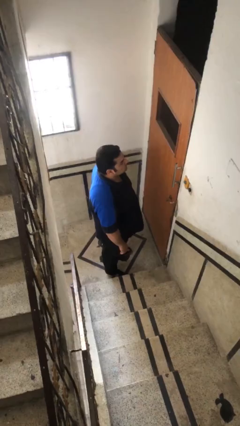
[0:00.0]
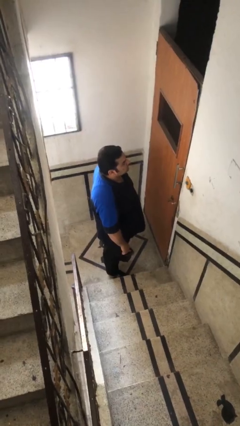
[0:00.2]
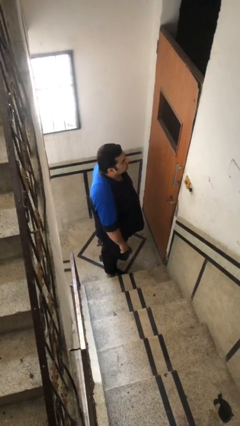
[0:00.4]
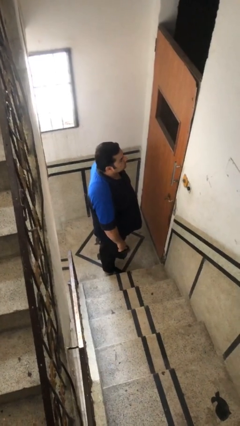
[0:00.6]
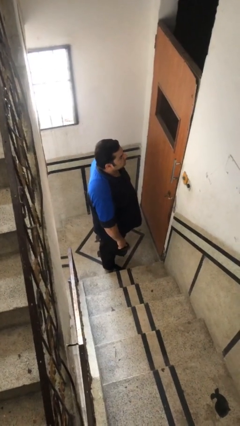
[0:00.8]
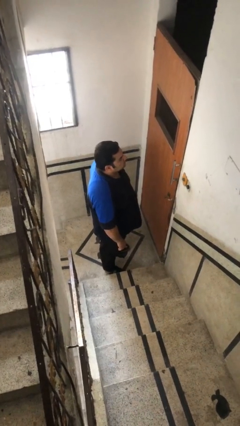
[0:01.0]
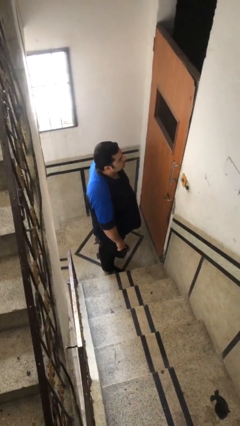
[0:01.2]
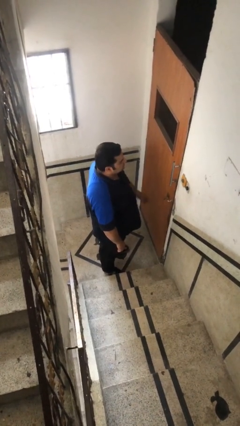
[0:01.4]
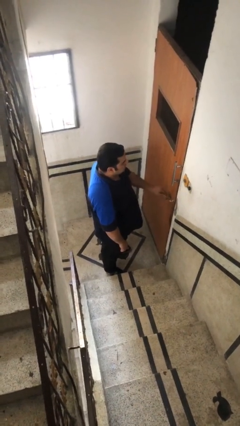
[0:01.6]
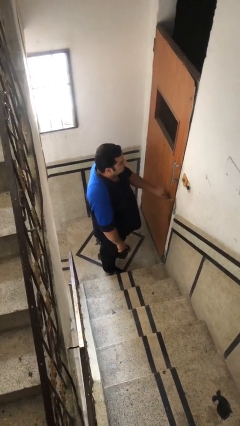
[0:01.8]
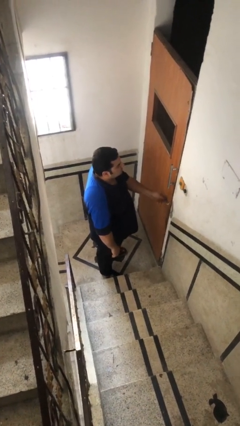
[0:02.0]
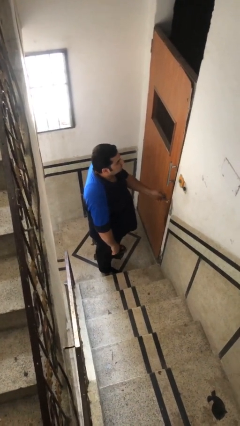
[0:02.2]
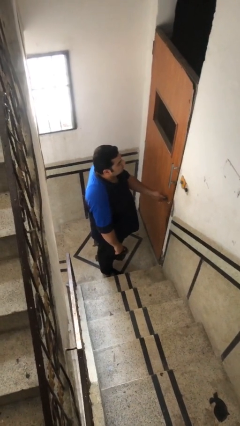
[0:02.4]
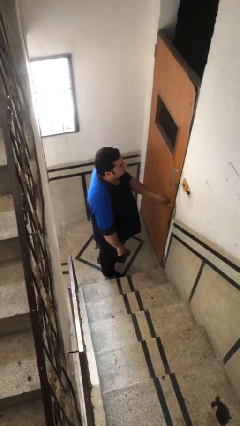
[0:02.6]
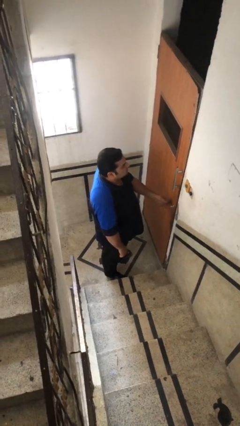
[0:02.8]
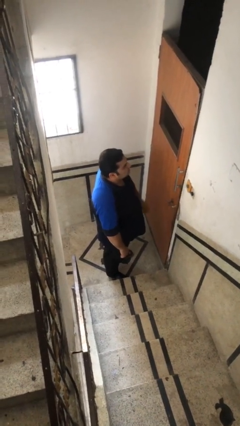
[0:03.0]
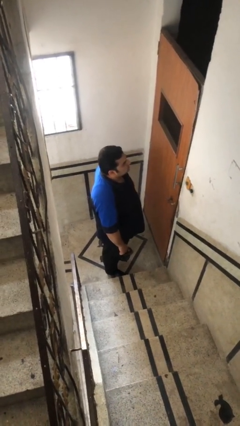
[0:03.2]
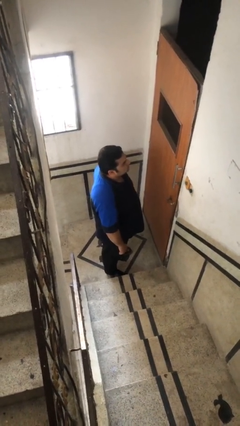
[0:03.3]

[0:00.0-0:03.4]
person unlocks door with keys

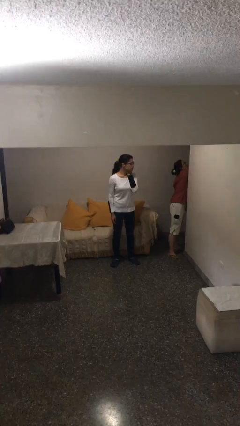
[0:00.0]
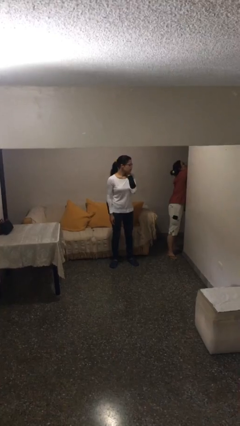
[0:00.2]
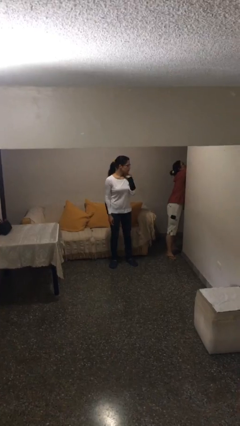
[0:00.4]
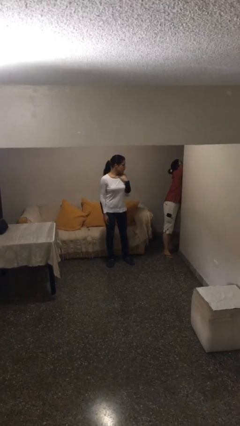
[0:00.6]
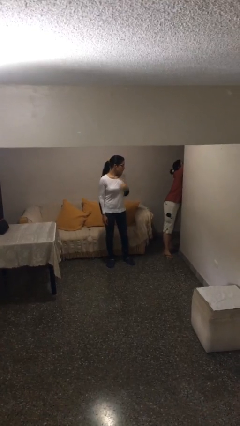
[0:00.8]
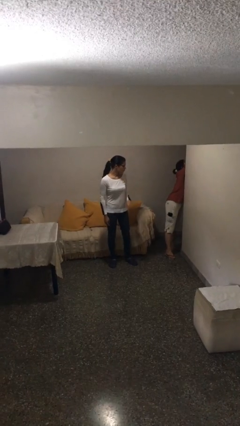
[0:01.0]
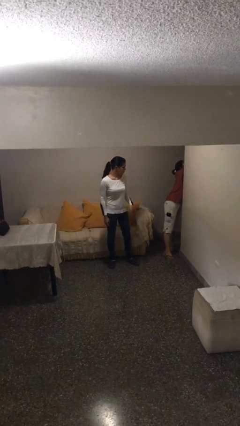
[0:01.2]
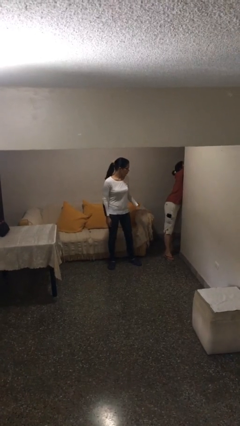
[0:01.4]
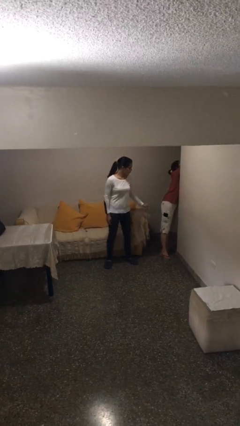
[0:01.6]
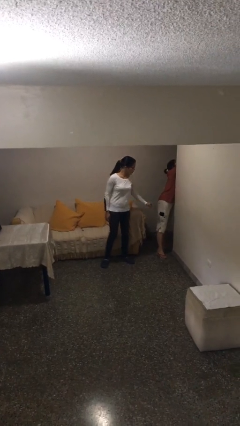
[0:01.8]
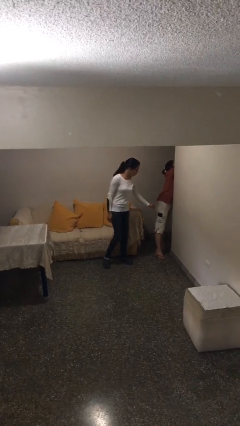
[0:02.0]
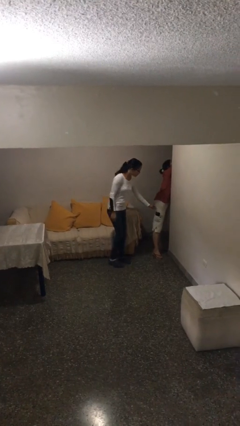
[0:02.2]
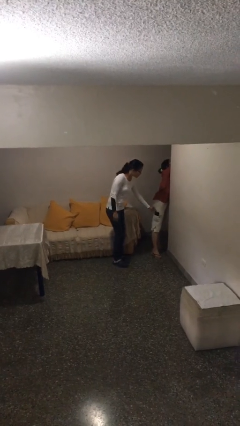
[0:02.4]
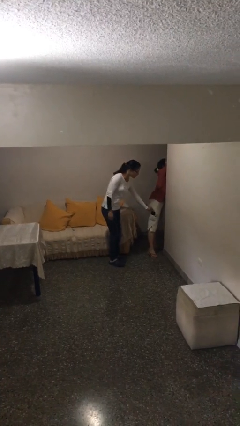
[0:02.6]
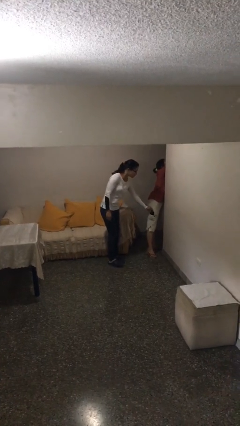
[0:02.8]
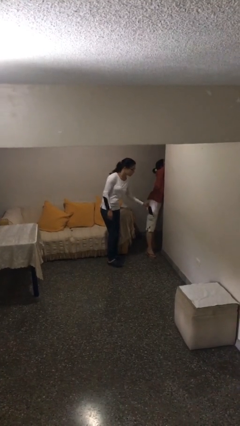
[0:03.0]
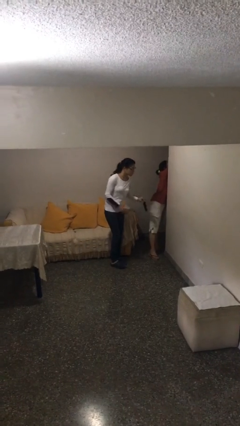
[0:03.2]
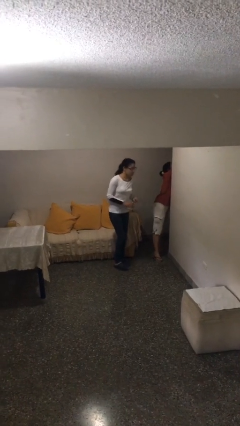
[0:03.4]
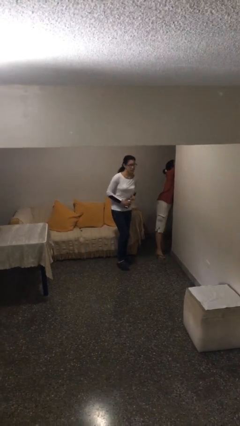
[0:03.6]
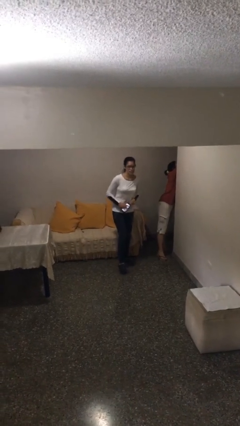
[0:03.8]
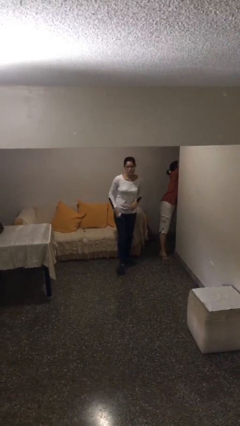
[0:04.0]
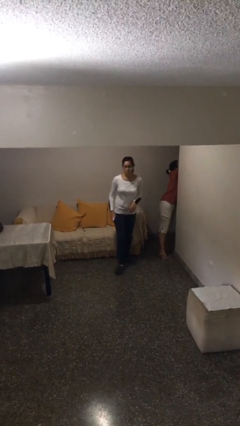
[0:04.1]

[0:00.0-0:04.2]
person steals object from person

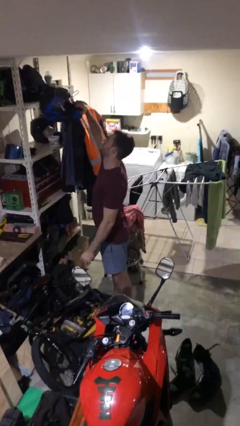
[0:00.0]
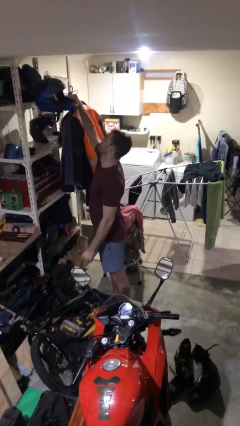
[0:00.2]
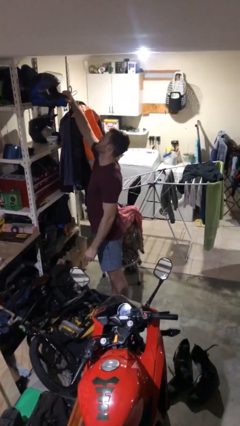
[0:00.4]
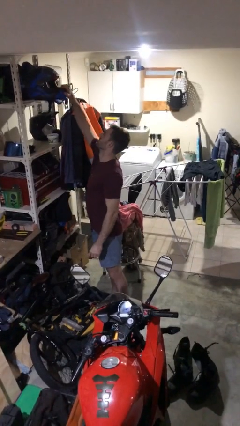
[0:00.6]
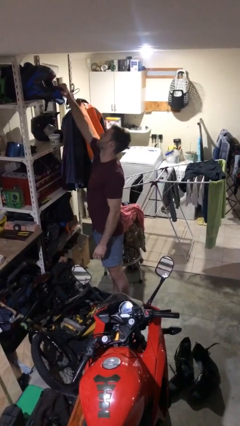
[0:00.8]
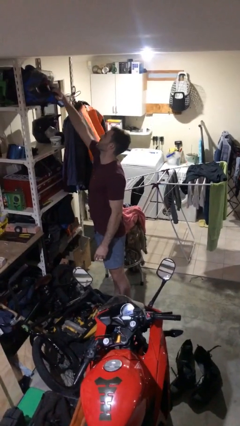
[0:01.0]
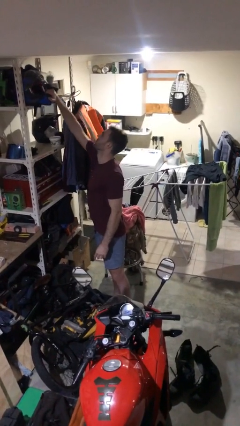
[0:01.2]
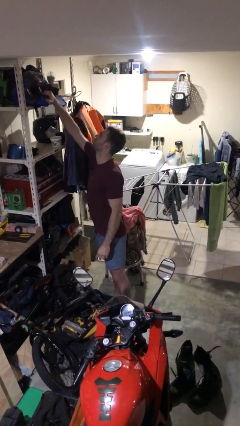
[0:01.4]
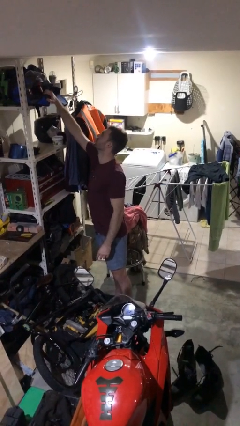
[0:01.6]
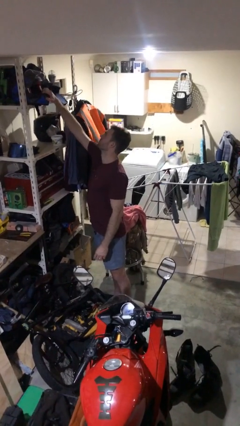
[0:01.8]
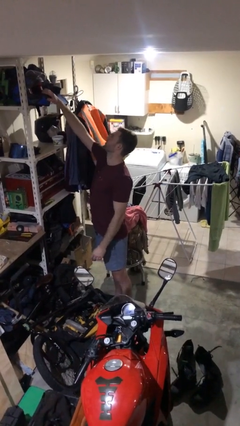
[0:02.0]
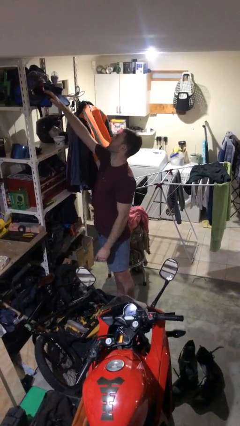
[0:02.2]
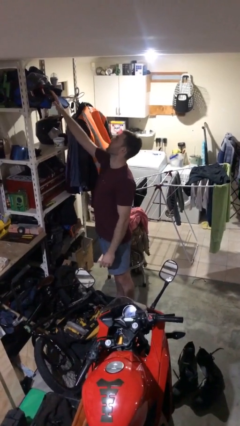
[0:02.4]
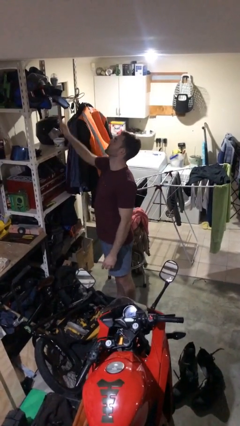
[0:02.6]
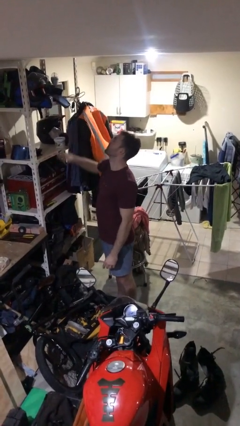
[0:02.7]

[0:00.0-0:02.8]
person puts down object on shelf

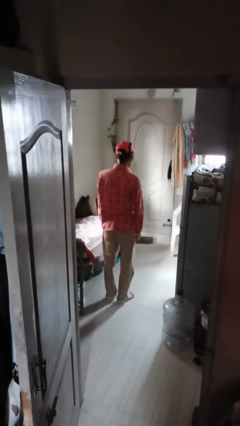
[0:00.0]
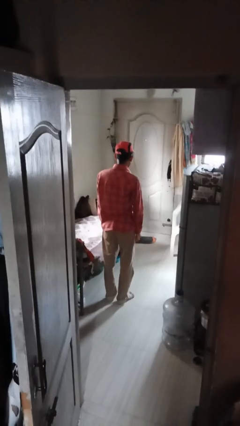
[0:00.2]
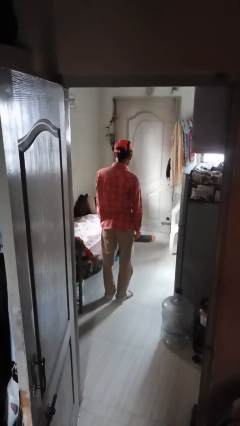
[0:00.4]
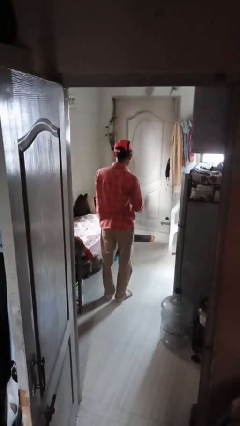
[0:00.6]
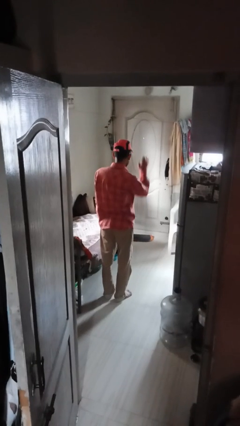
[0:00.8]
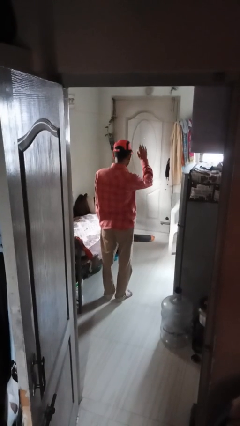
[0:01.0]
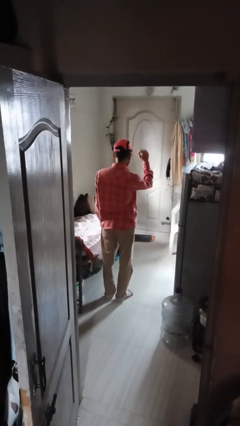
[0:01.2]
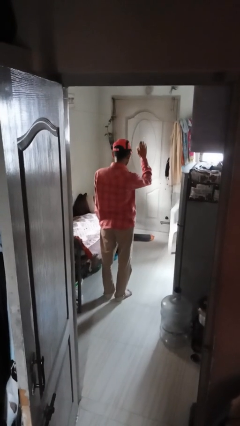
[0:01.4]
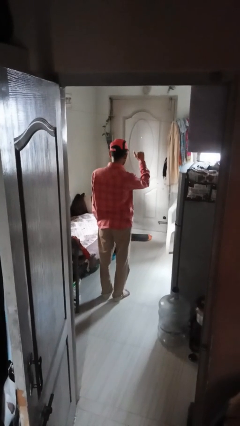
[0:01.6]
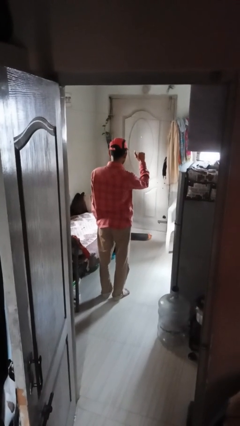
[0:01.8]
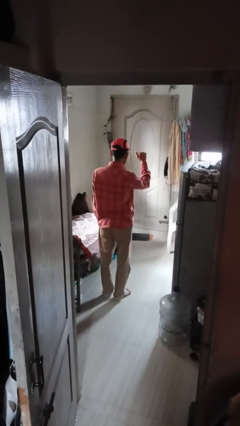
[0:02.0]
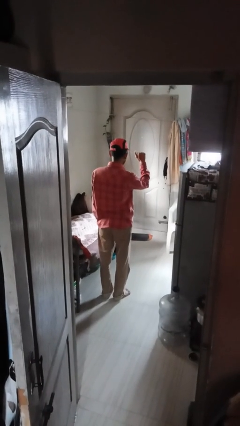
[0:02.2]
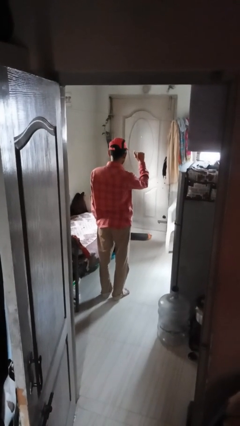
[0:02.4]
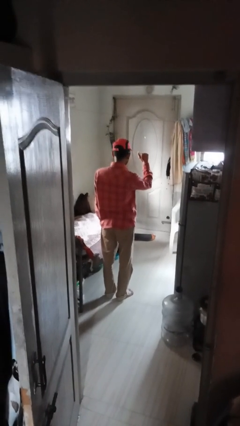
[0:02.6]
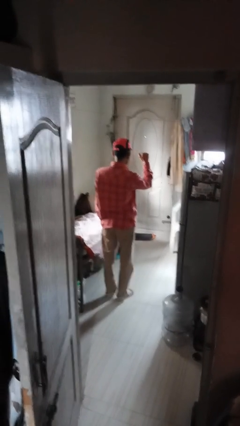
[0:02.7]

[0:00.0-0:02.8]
person gestures come here

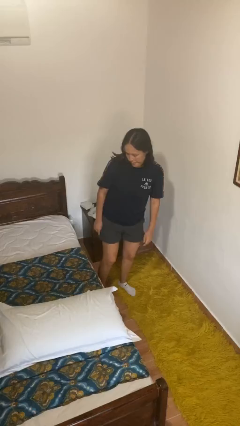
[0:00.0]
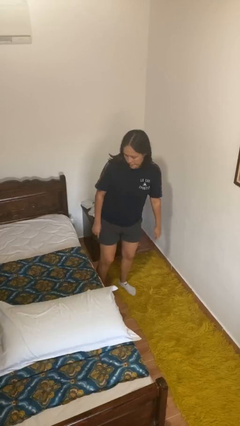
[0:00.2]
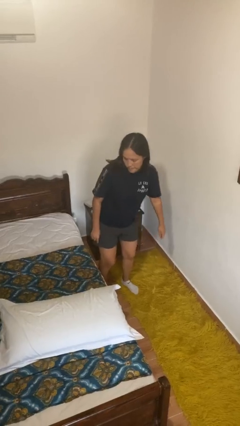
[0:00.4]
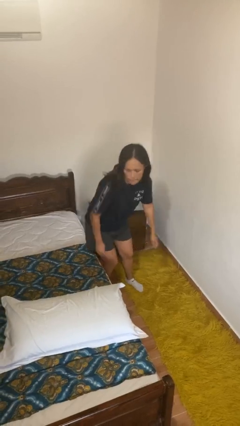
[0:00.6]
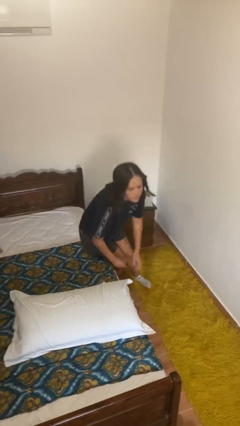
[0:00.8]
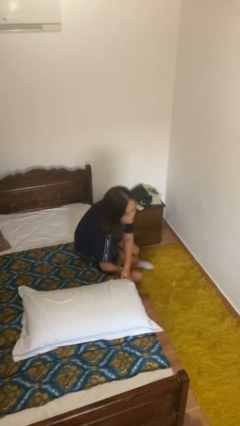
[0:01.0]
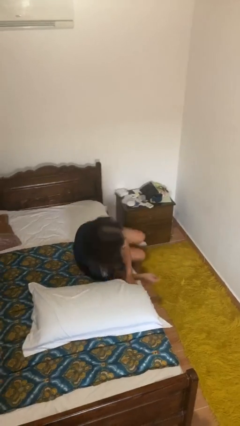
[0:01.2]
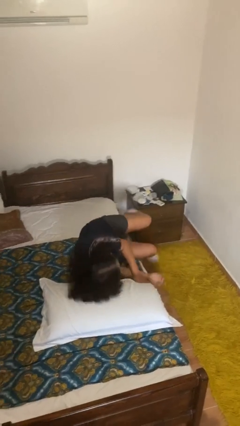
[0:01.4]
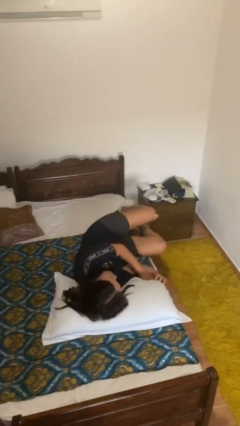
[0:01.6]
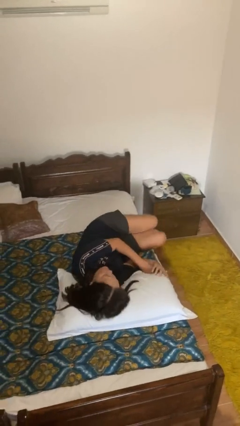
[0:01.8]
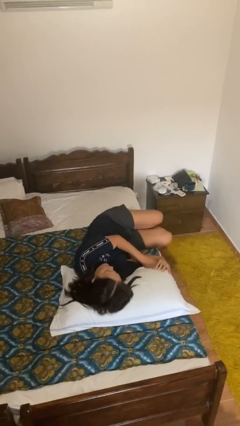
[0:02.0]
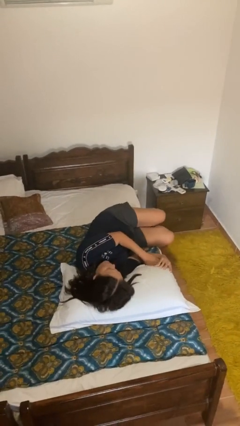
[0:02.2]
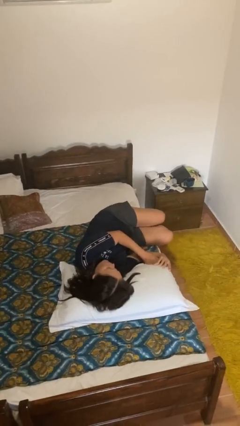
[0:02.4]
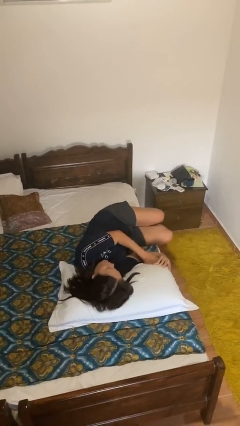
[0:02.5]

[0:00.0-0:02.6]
person lies down on bed

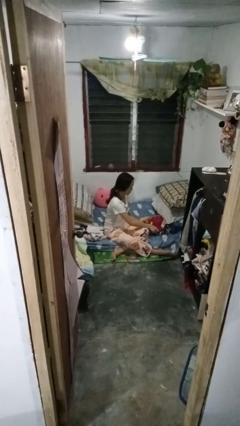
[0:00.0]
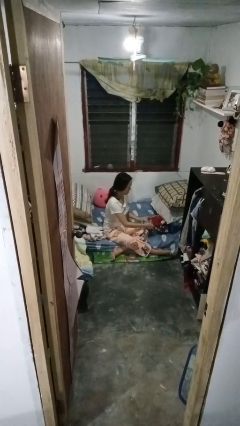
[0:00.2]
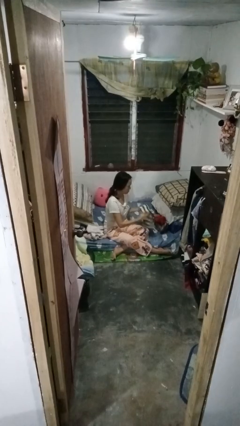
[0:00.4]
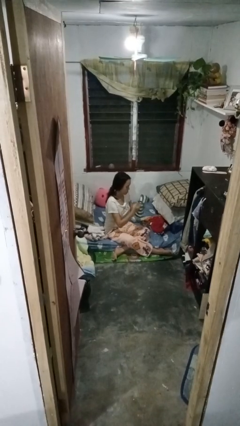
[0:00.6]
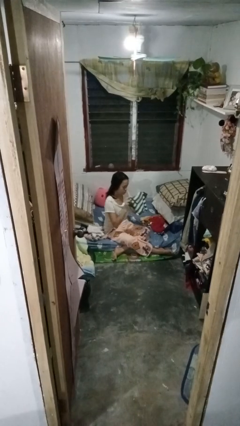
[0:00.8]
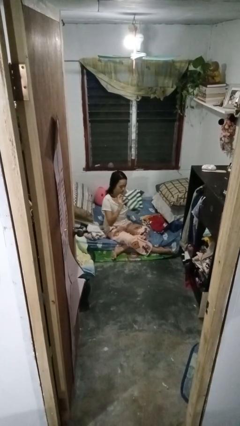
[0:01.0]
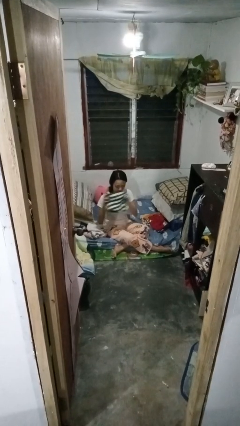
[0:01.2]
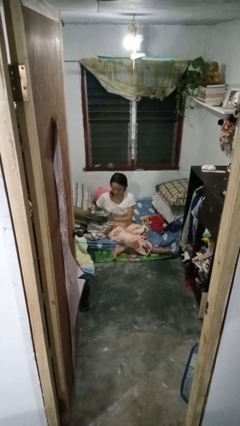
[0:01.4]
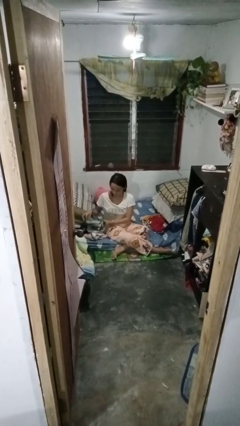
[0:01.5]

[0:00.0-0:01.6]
person folds shirt
